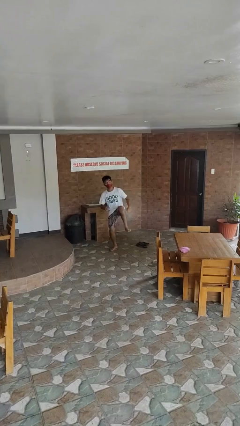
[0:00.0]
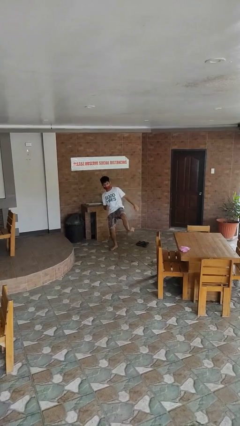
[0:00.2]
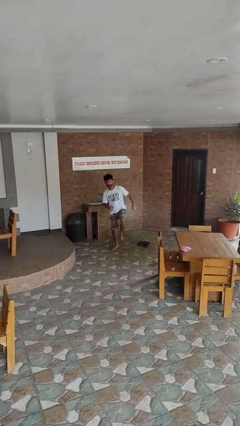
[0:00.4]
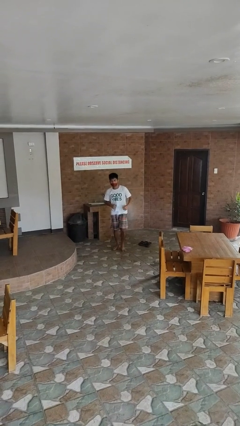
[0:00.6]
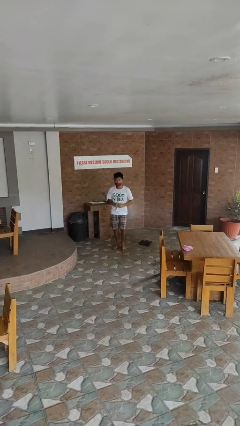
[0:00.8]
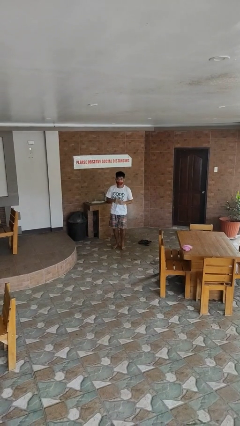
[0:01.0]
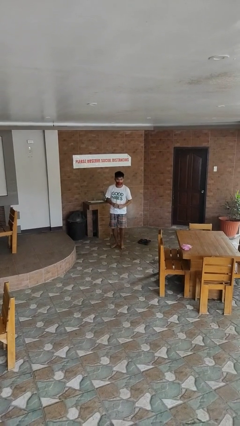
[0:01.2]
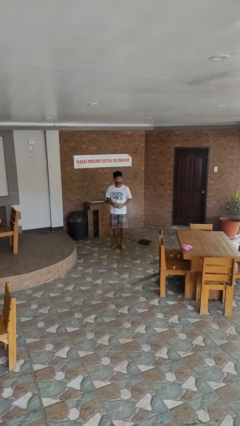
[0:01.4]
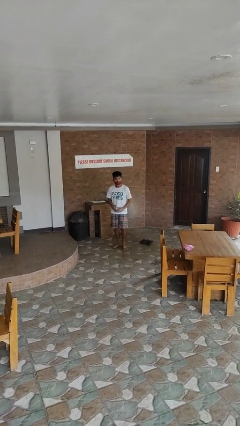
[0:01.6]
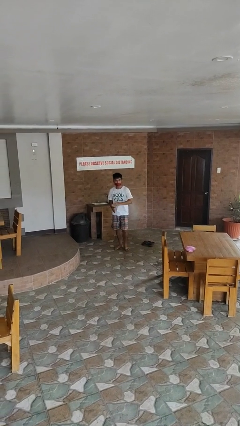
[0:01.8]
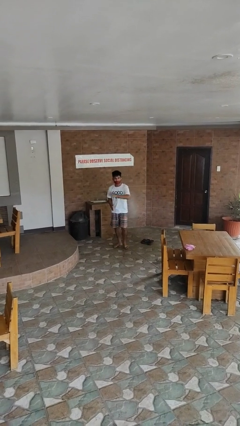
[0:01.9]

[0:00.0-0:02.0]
person karate kicks

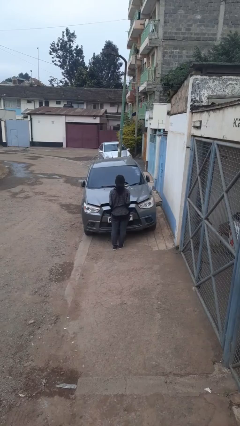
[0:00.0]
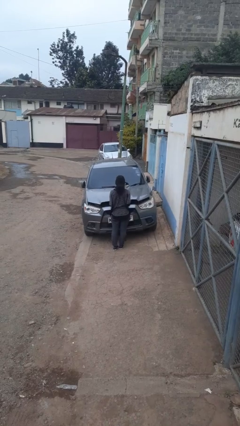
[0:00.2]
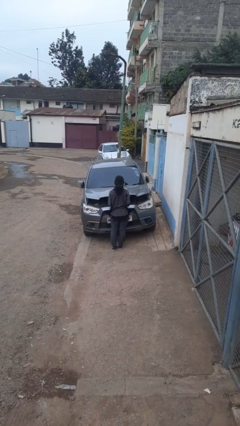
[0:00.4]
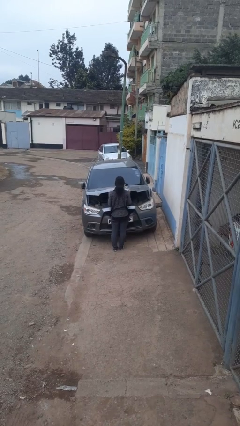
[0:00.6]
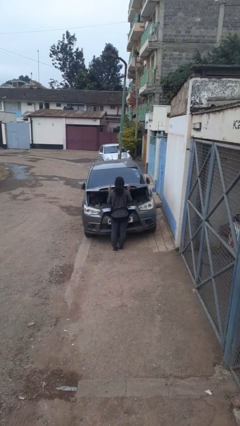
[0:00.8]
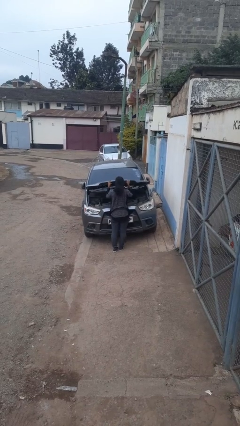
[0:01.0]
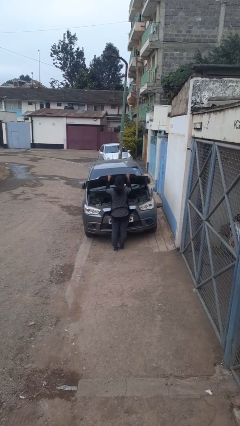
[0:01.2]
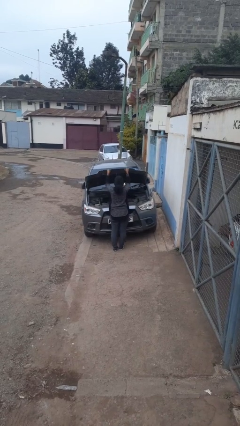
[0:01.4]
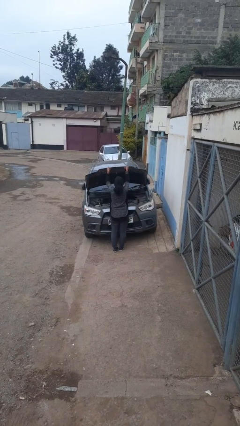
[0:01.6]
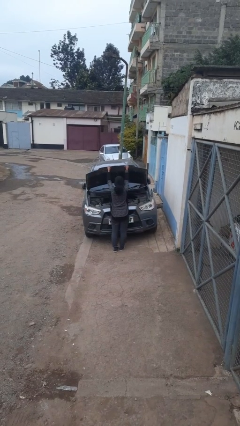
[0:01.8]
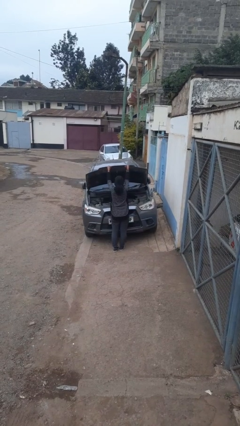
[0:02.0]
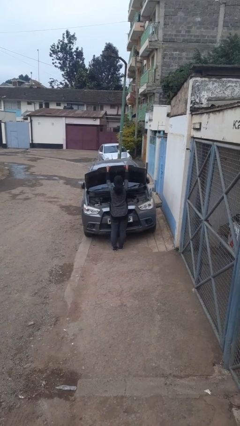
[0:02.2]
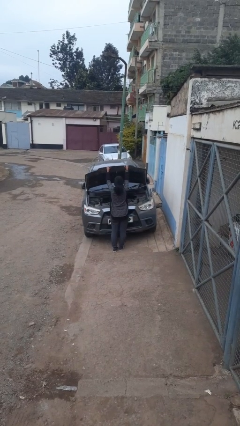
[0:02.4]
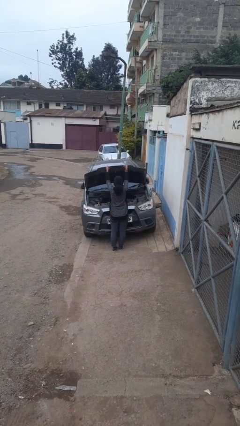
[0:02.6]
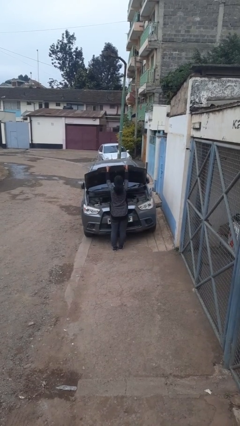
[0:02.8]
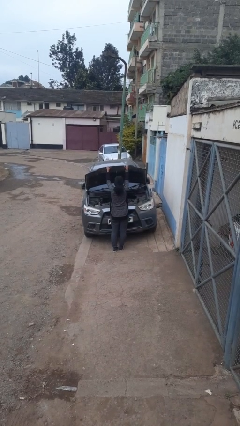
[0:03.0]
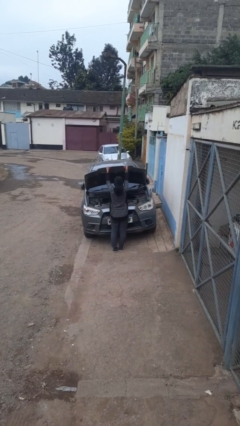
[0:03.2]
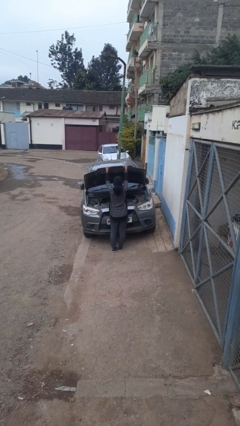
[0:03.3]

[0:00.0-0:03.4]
person opens car hood

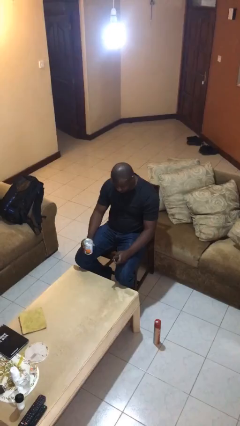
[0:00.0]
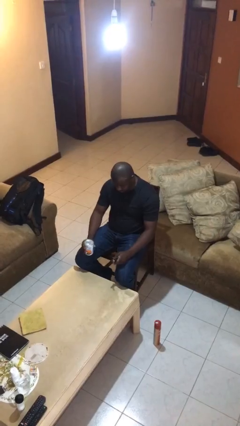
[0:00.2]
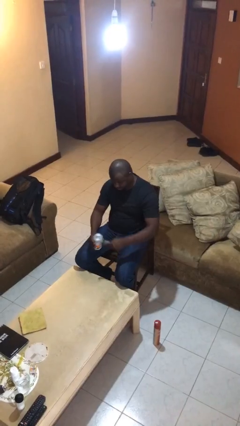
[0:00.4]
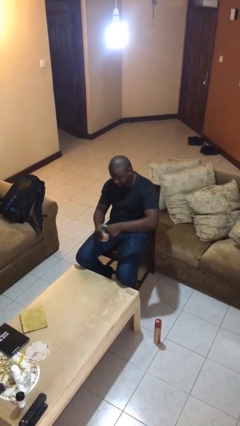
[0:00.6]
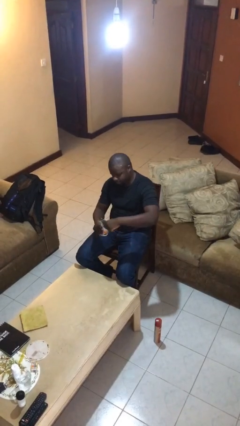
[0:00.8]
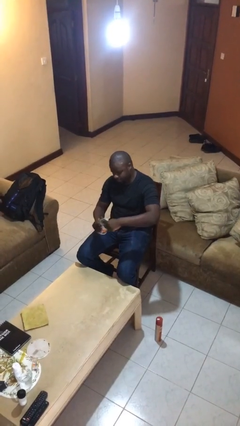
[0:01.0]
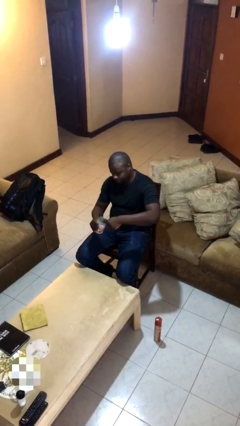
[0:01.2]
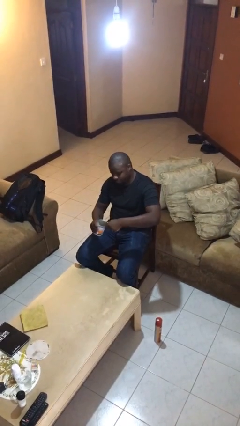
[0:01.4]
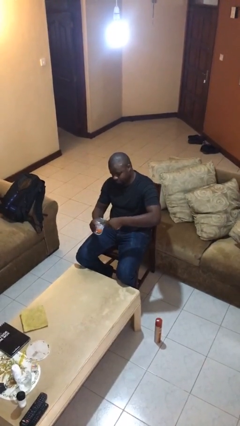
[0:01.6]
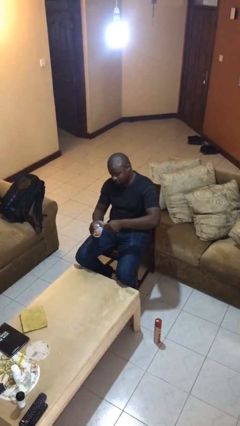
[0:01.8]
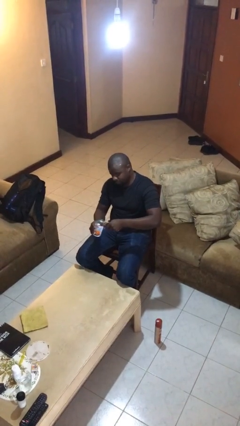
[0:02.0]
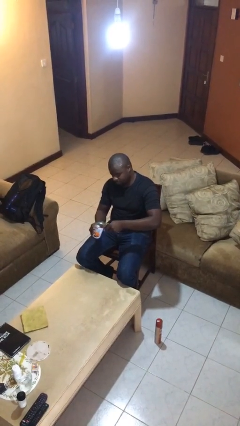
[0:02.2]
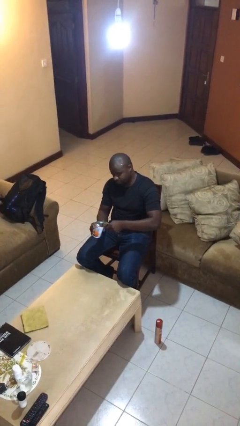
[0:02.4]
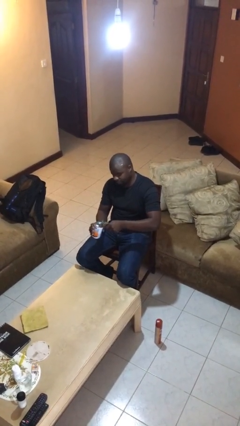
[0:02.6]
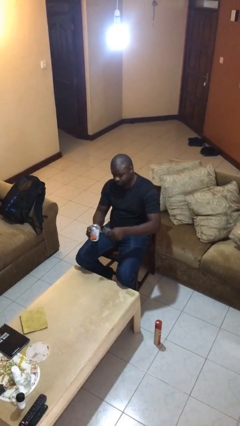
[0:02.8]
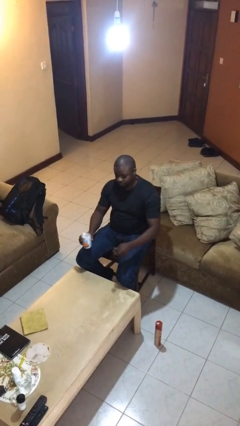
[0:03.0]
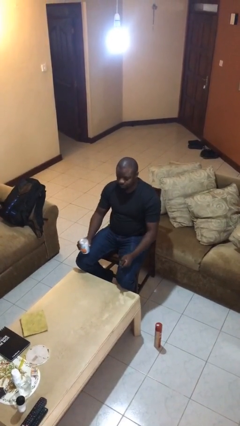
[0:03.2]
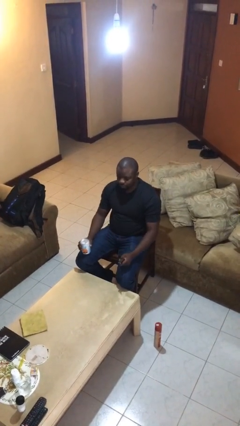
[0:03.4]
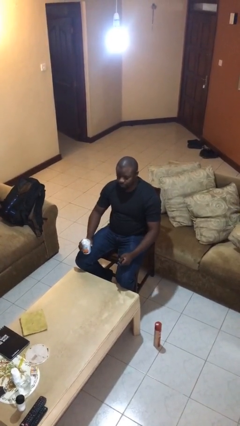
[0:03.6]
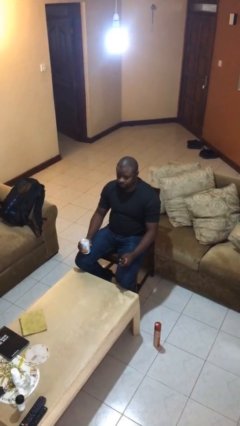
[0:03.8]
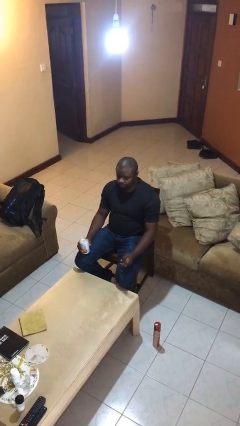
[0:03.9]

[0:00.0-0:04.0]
person opens can with can opener

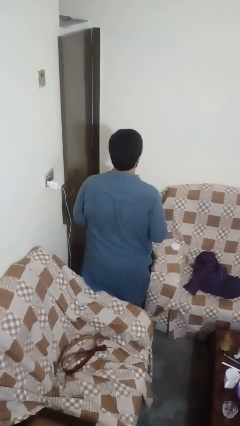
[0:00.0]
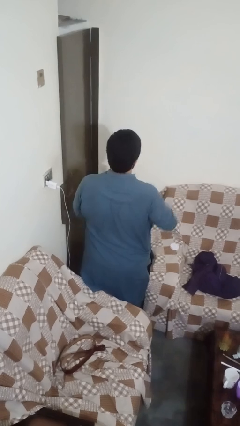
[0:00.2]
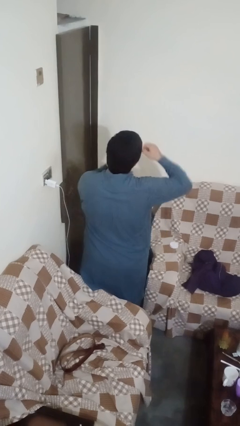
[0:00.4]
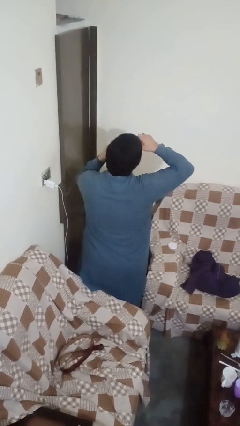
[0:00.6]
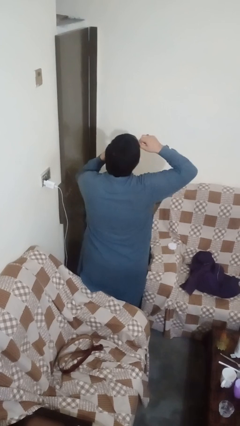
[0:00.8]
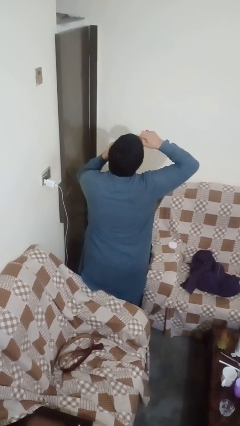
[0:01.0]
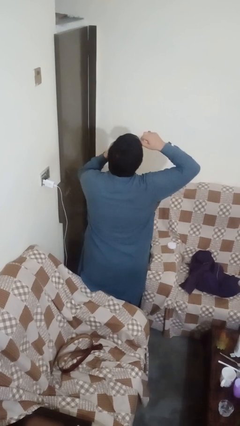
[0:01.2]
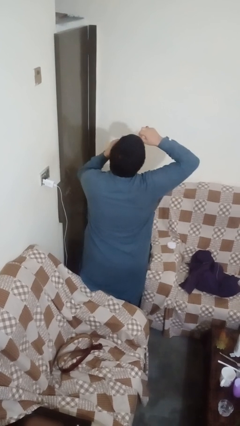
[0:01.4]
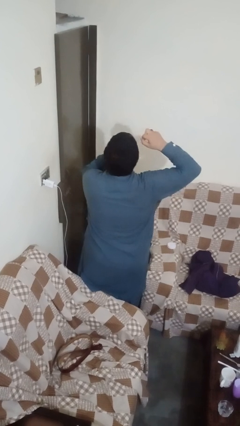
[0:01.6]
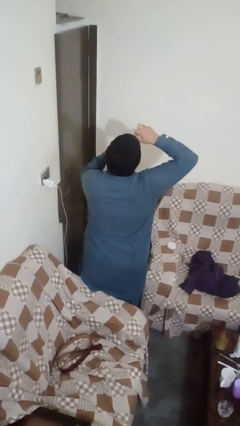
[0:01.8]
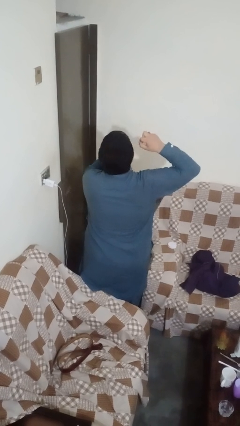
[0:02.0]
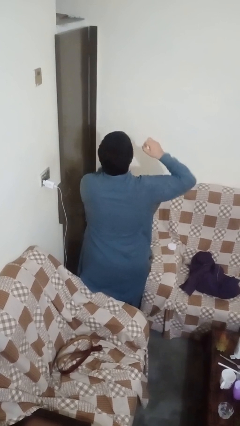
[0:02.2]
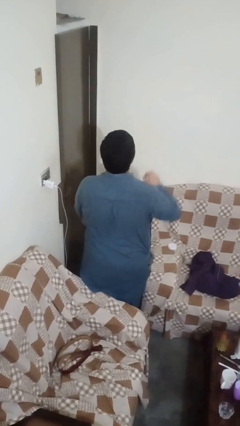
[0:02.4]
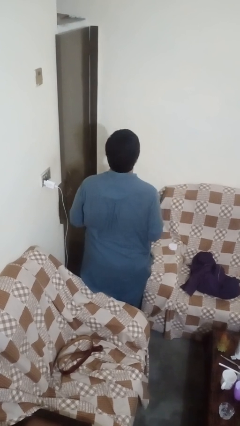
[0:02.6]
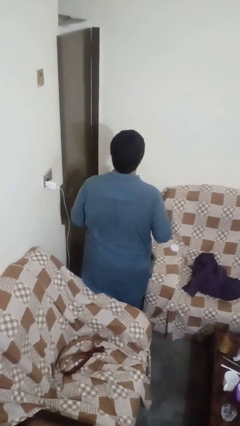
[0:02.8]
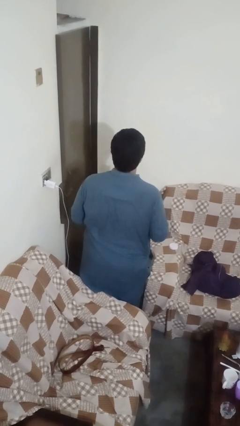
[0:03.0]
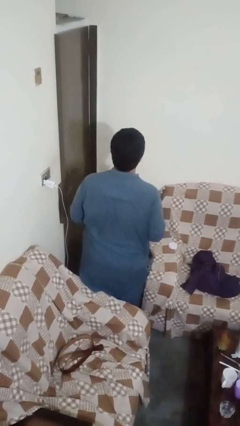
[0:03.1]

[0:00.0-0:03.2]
person flosses

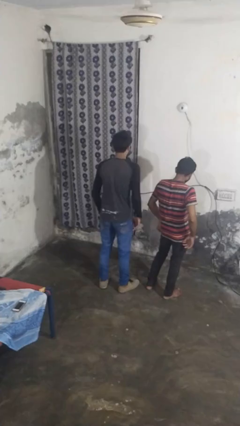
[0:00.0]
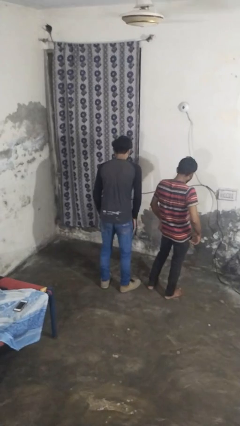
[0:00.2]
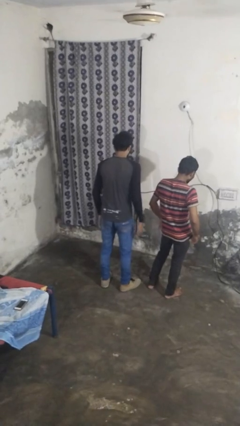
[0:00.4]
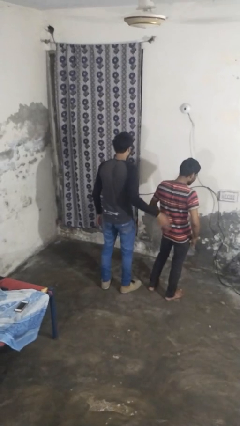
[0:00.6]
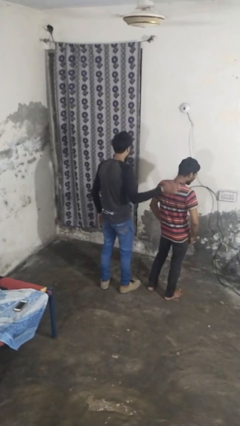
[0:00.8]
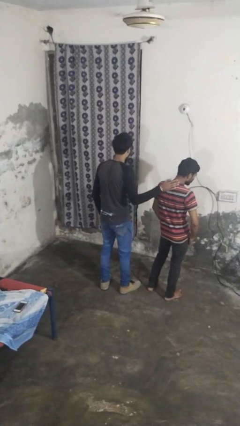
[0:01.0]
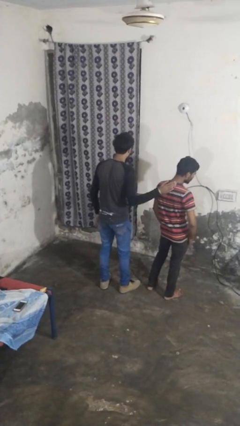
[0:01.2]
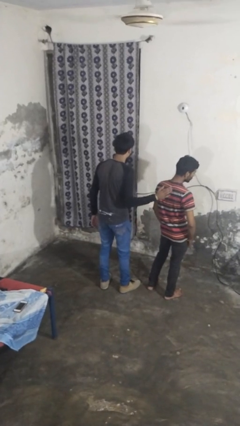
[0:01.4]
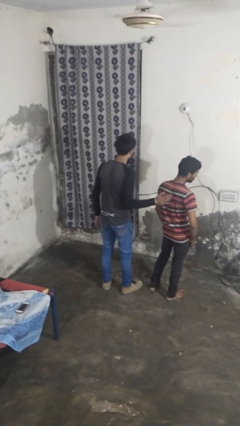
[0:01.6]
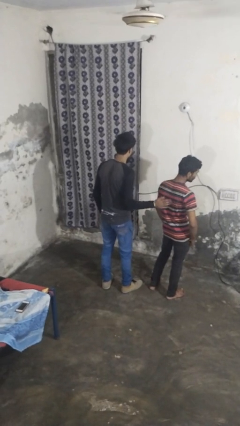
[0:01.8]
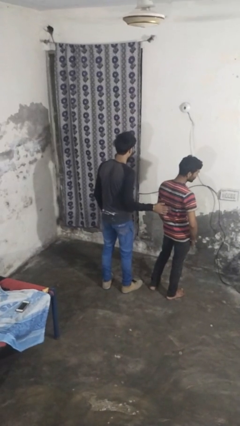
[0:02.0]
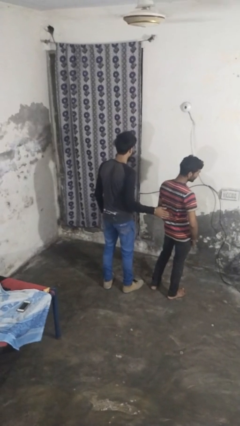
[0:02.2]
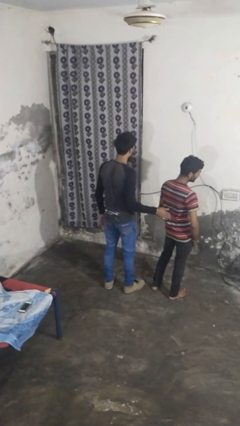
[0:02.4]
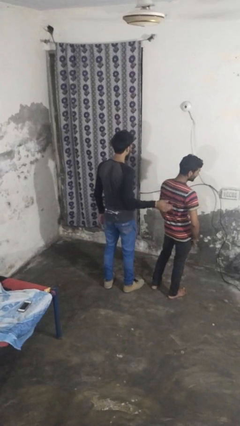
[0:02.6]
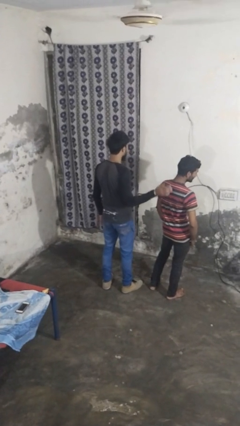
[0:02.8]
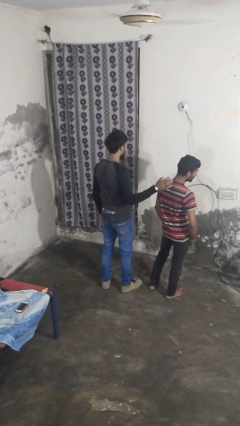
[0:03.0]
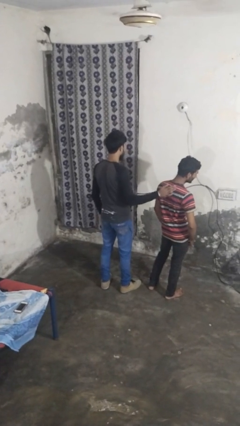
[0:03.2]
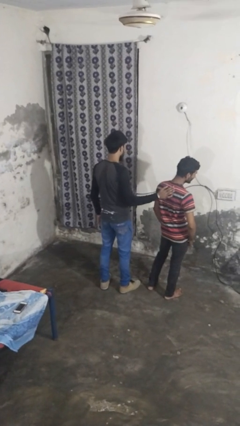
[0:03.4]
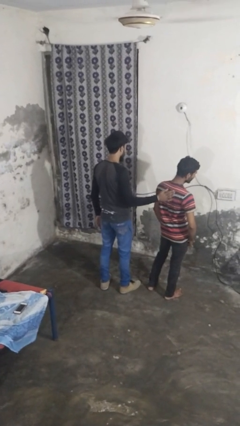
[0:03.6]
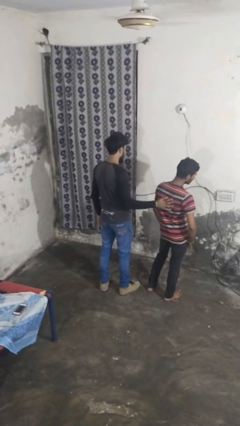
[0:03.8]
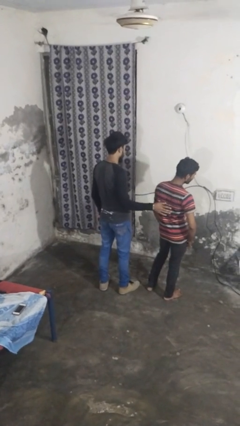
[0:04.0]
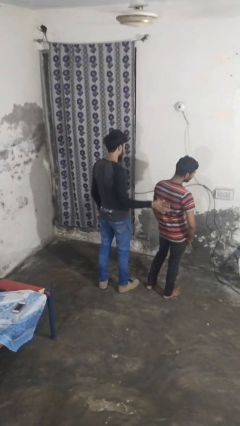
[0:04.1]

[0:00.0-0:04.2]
person touches back of person

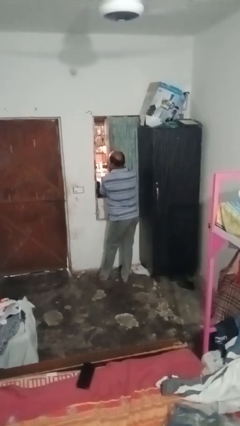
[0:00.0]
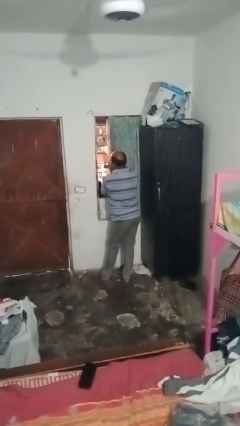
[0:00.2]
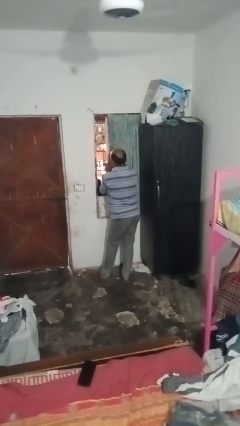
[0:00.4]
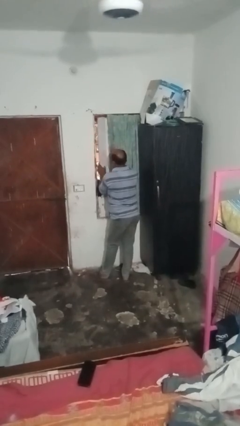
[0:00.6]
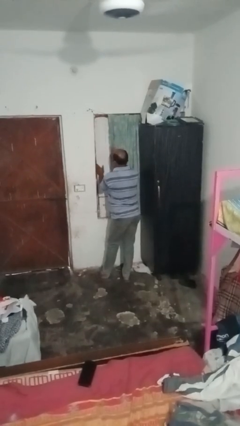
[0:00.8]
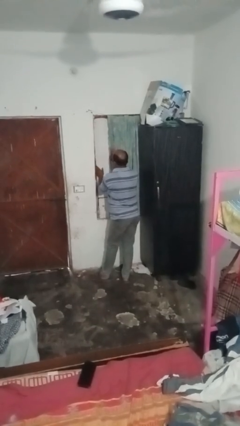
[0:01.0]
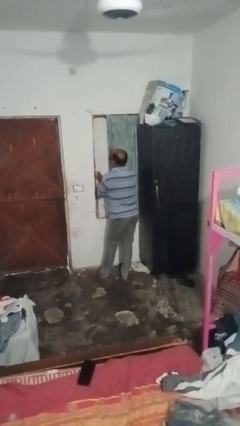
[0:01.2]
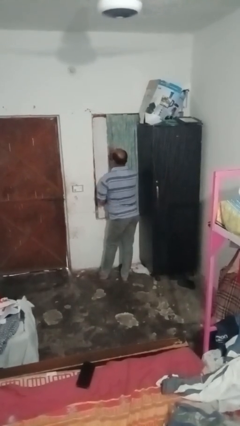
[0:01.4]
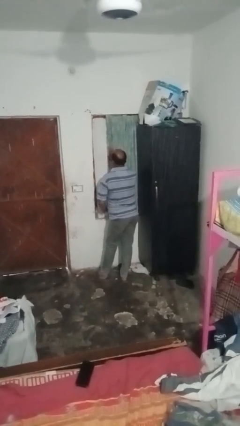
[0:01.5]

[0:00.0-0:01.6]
person closes home window
